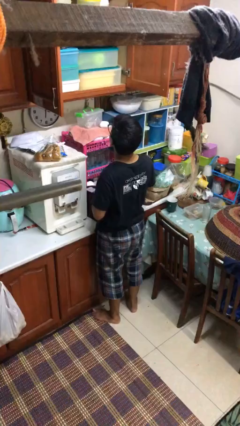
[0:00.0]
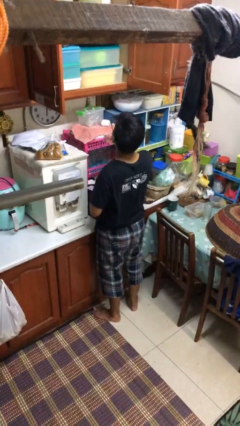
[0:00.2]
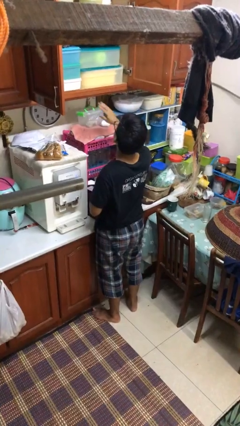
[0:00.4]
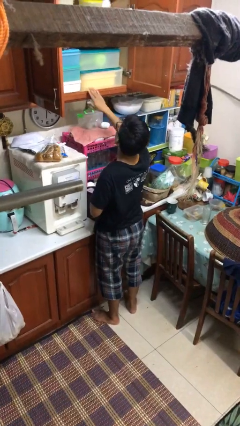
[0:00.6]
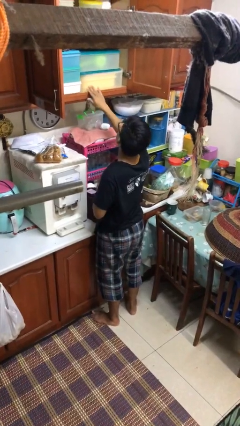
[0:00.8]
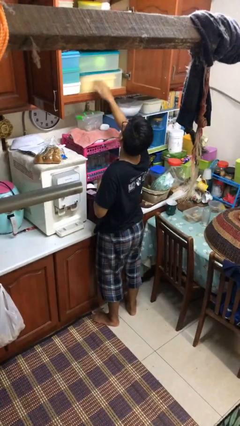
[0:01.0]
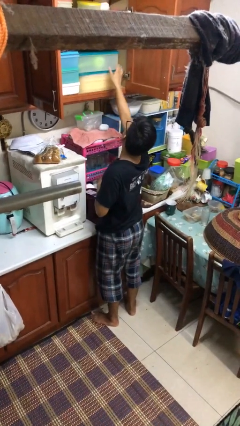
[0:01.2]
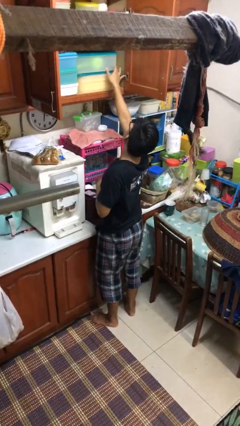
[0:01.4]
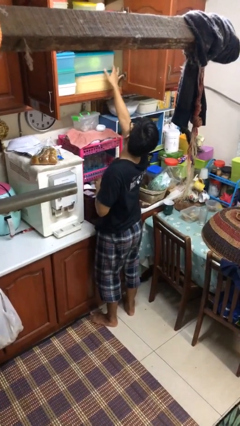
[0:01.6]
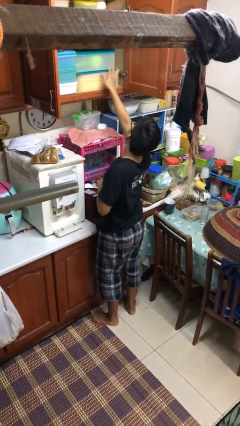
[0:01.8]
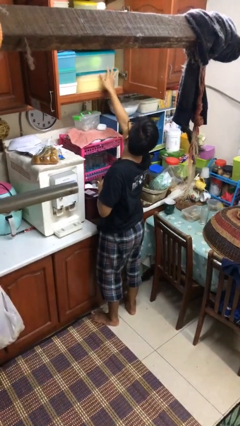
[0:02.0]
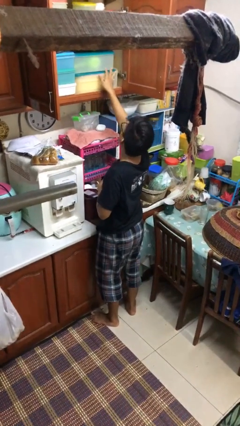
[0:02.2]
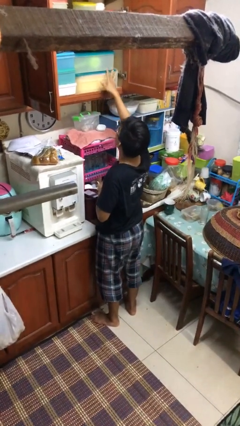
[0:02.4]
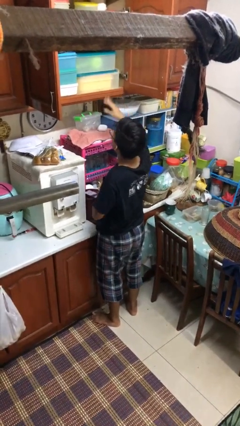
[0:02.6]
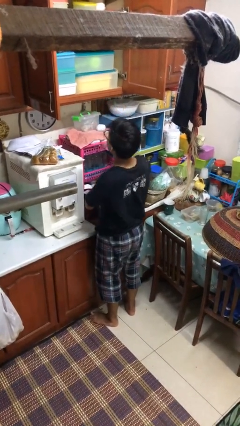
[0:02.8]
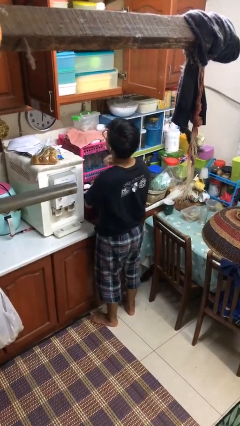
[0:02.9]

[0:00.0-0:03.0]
person searches in kitchen drawer

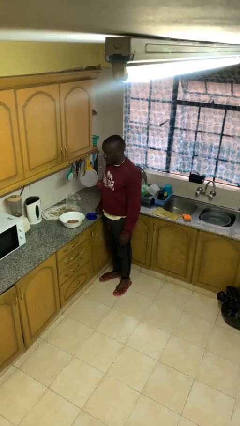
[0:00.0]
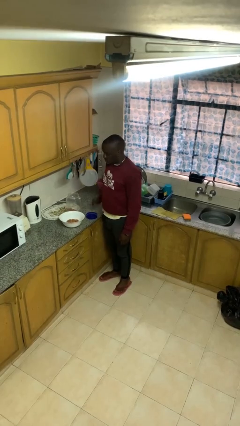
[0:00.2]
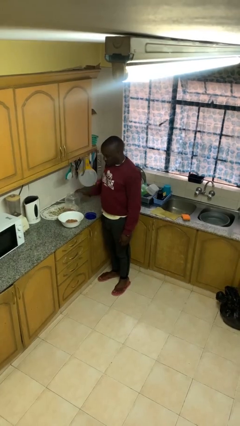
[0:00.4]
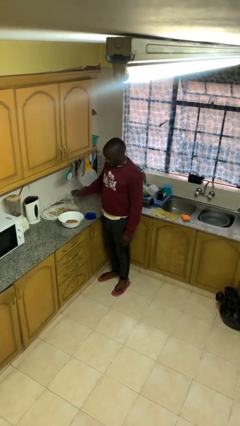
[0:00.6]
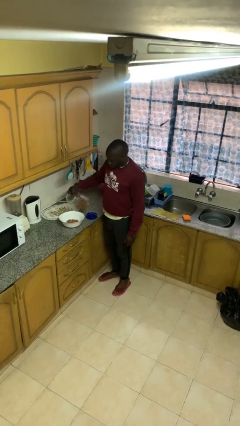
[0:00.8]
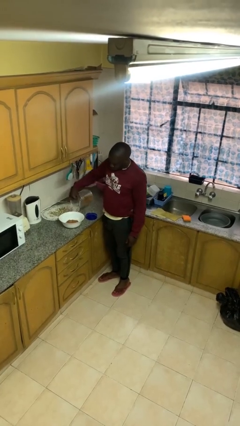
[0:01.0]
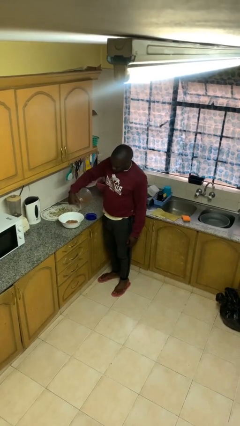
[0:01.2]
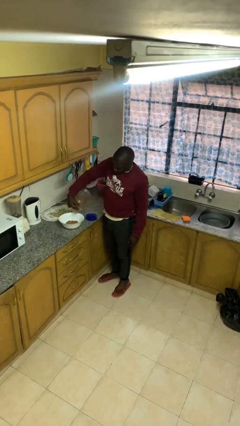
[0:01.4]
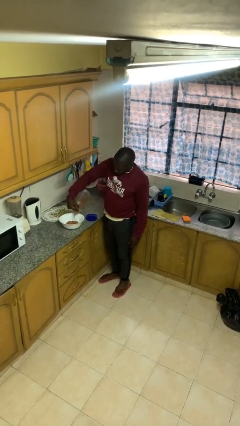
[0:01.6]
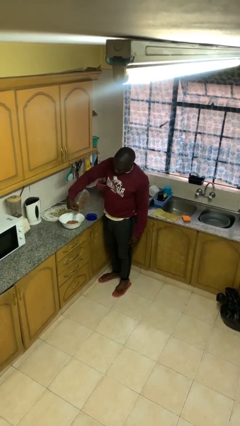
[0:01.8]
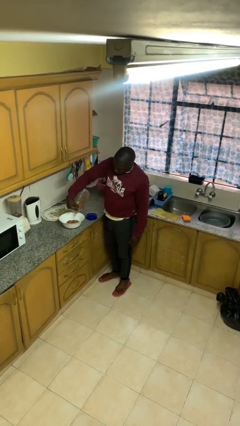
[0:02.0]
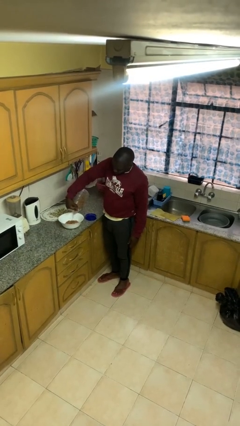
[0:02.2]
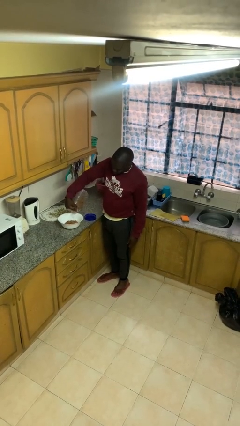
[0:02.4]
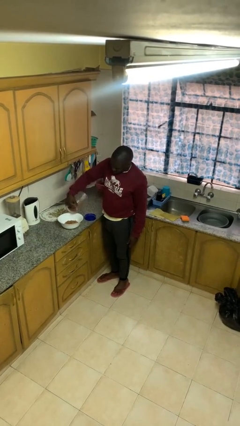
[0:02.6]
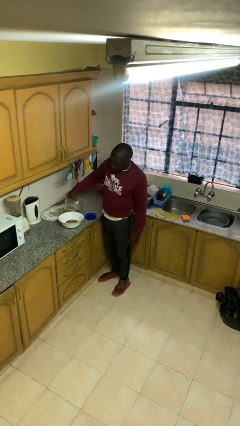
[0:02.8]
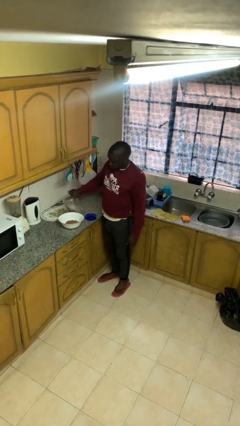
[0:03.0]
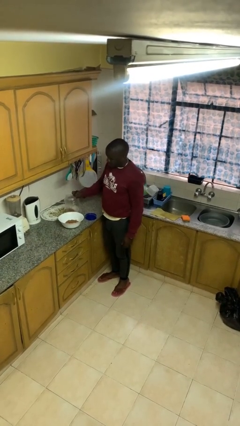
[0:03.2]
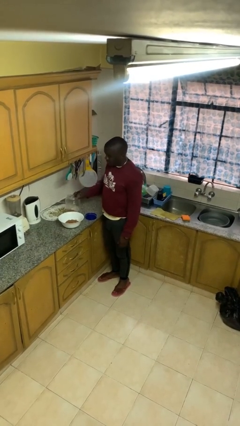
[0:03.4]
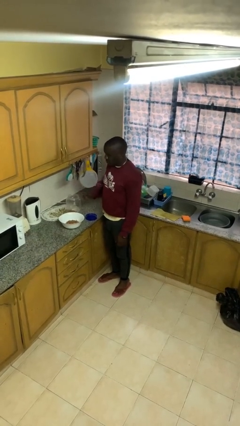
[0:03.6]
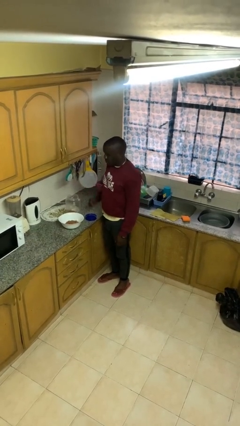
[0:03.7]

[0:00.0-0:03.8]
person pours into bowl

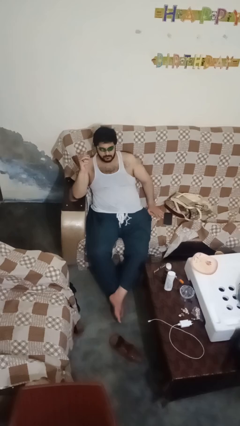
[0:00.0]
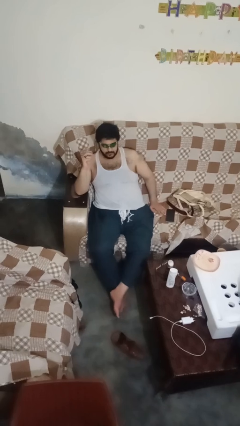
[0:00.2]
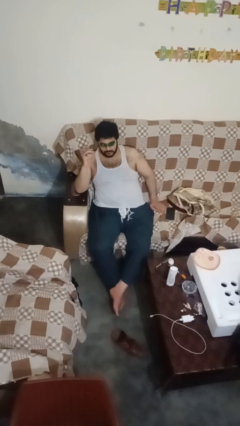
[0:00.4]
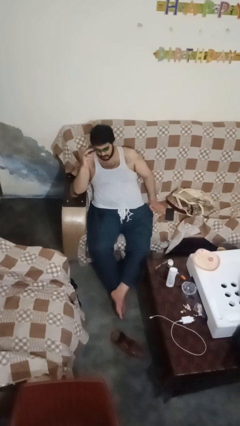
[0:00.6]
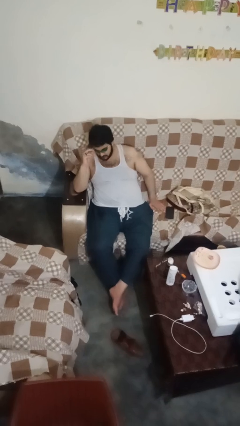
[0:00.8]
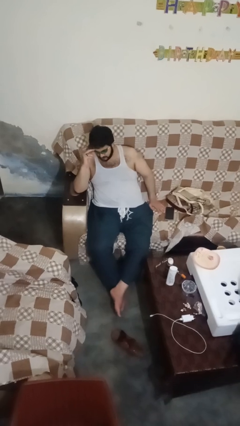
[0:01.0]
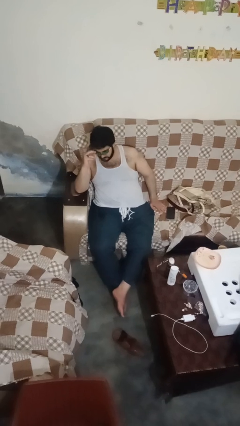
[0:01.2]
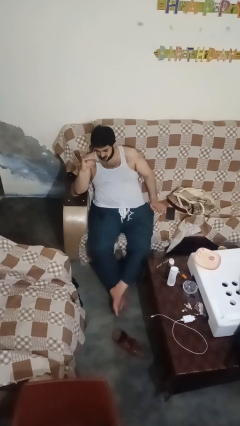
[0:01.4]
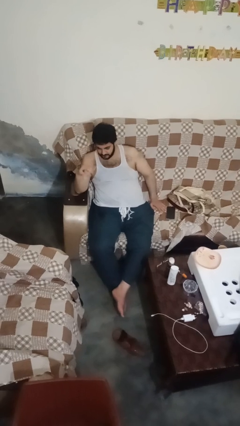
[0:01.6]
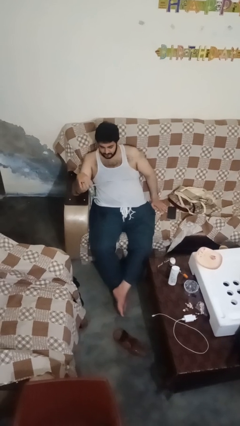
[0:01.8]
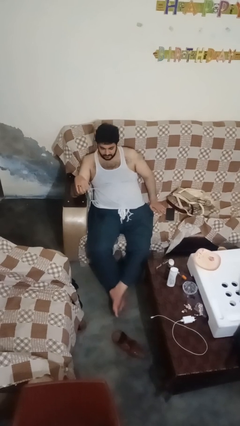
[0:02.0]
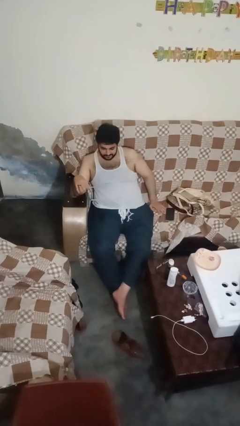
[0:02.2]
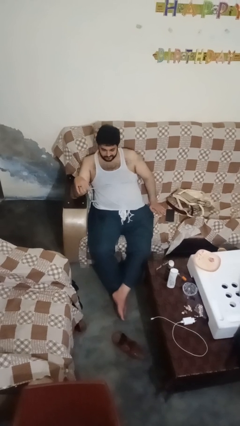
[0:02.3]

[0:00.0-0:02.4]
person takes off sunglasses

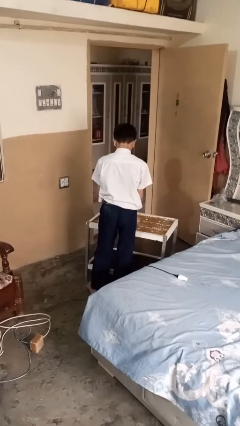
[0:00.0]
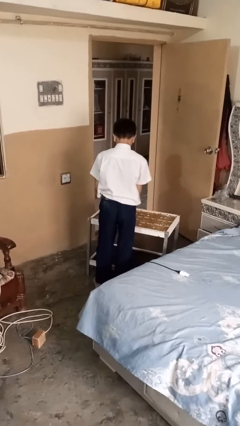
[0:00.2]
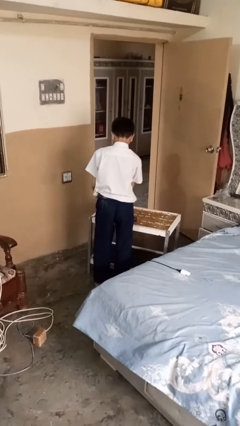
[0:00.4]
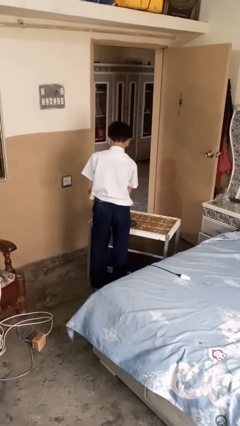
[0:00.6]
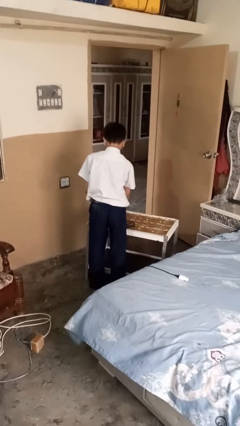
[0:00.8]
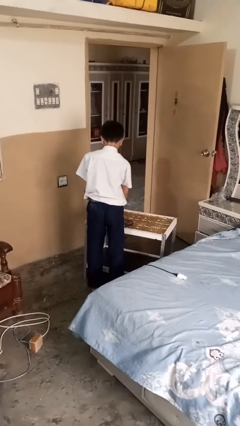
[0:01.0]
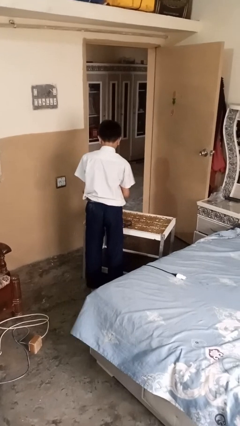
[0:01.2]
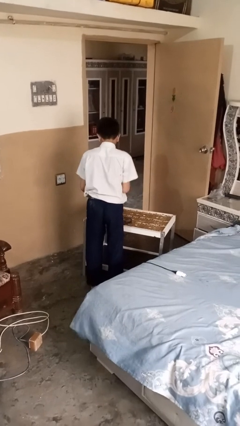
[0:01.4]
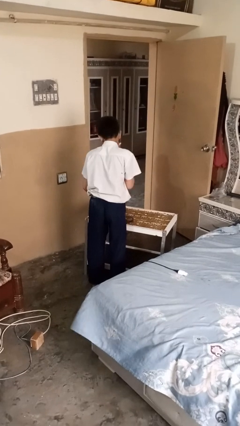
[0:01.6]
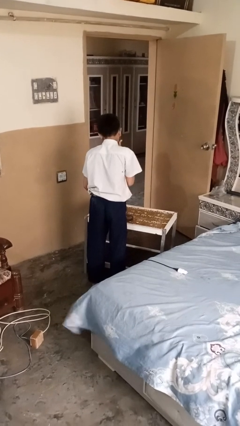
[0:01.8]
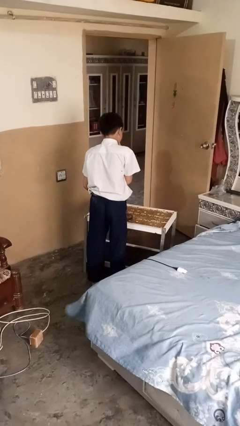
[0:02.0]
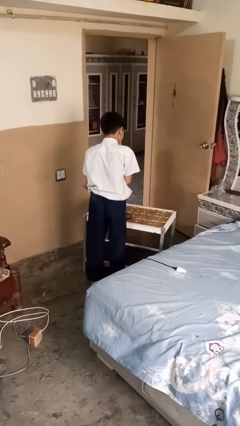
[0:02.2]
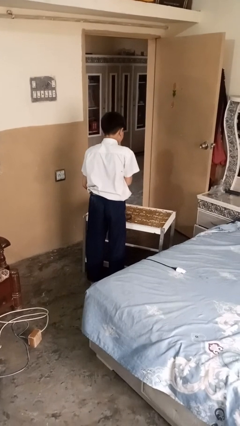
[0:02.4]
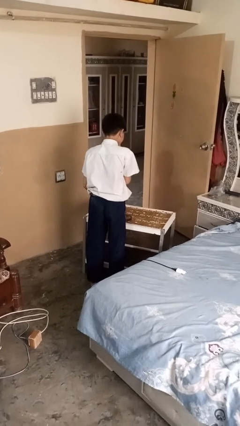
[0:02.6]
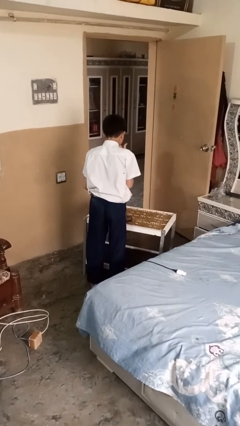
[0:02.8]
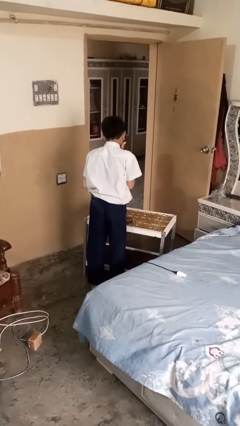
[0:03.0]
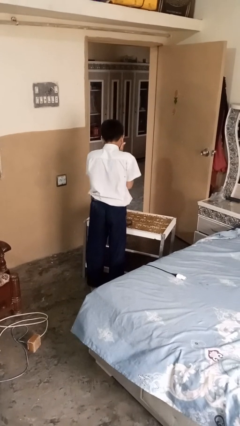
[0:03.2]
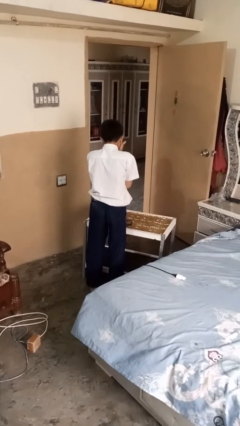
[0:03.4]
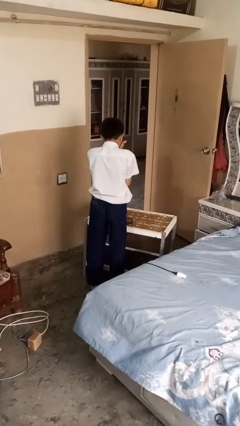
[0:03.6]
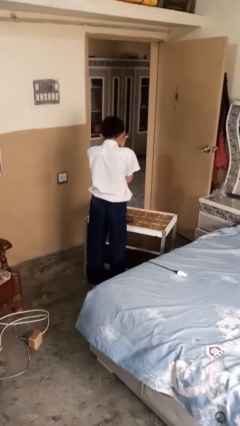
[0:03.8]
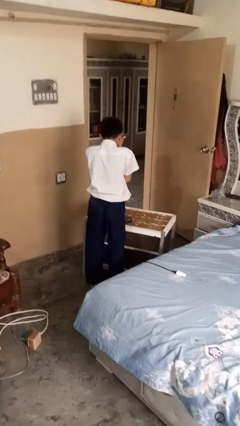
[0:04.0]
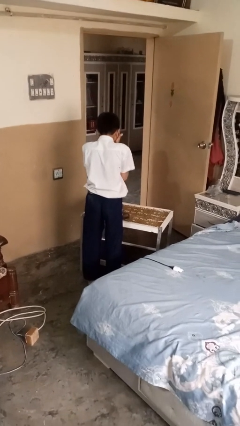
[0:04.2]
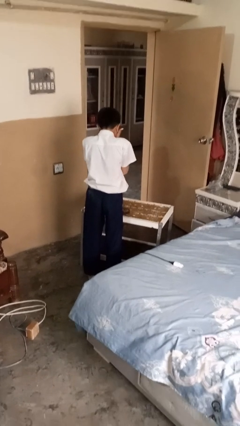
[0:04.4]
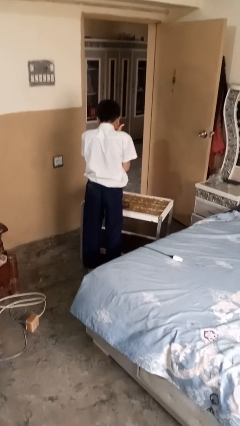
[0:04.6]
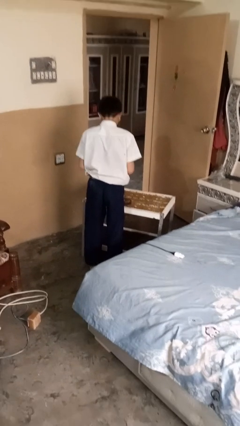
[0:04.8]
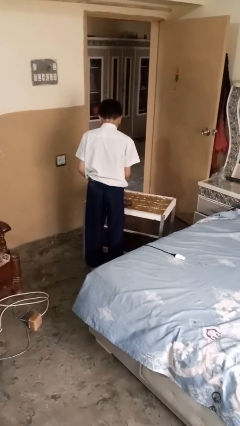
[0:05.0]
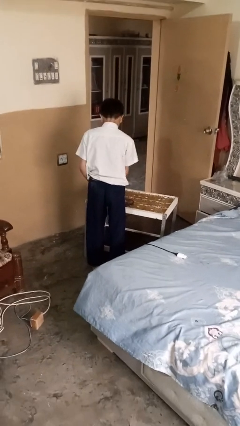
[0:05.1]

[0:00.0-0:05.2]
person applies shaving cream

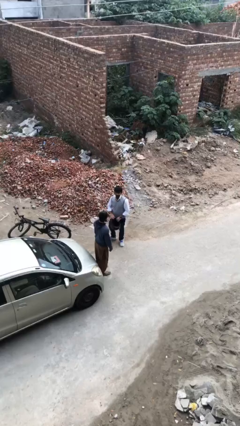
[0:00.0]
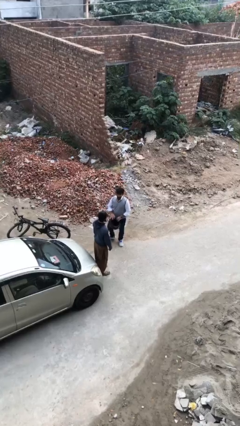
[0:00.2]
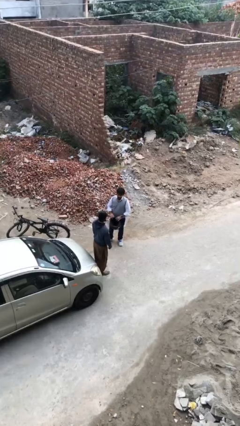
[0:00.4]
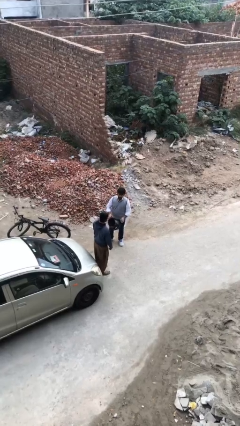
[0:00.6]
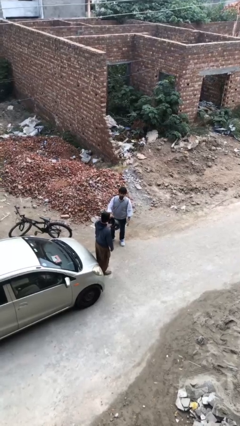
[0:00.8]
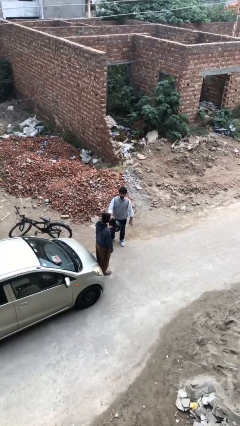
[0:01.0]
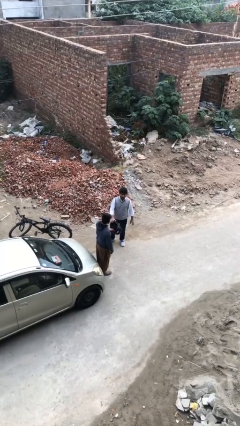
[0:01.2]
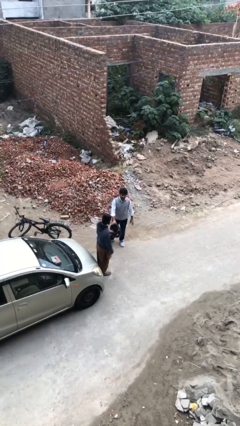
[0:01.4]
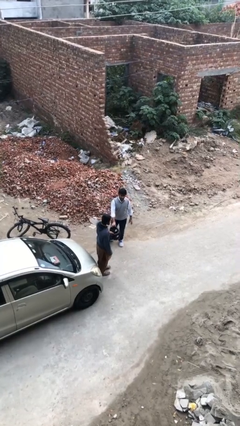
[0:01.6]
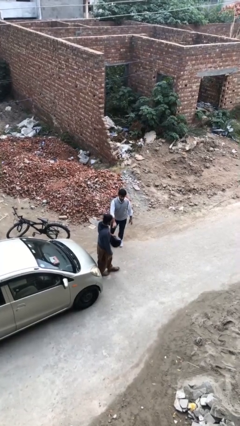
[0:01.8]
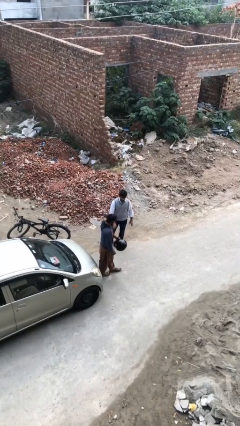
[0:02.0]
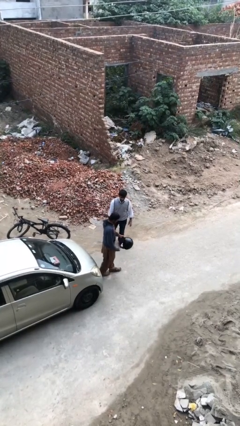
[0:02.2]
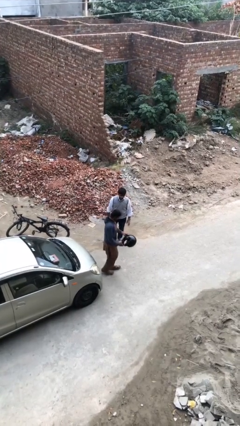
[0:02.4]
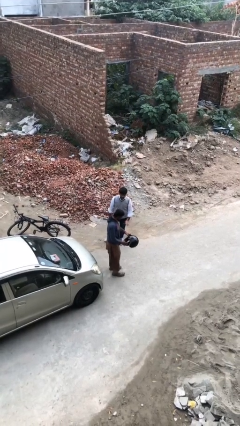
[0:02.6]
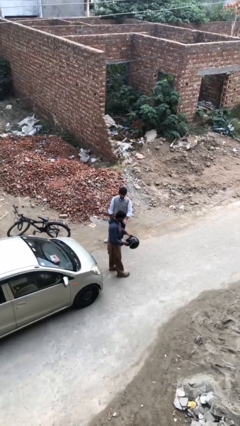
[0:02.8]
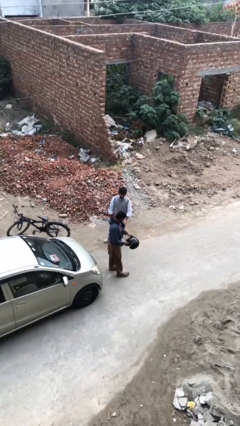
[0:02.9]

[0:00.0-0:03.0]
person transfers object to person

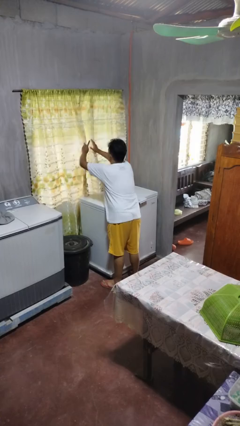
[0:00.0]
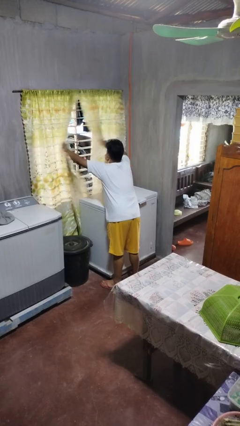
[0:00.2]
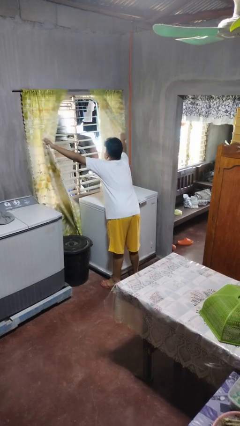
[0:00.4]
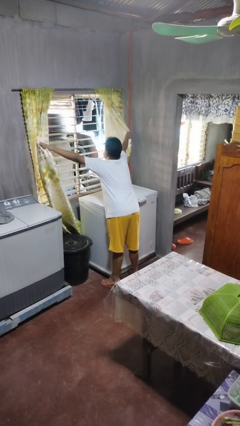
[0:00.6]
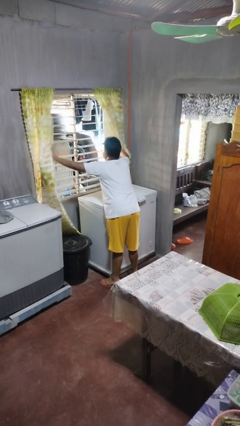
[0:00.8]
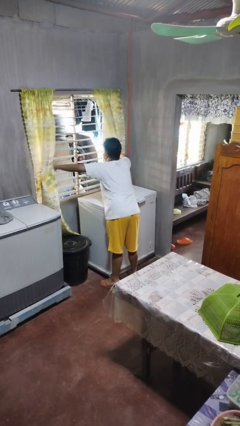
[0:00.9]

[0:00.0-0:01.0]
person opens curtains
